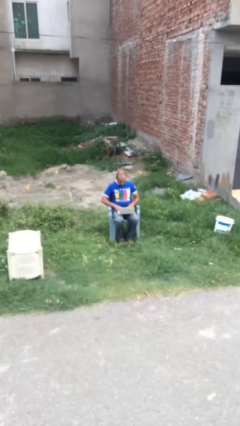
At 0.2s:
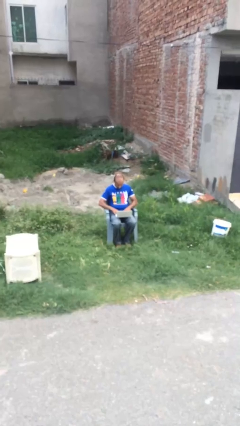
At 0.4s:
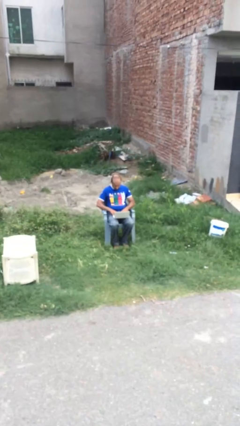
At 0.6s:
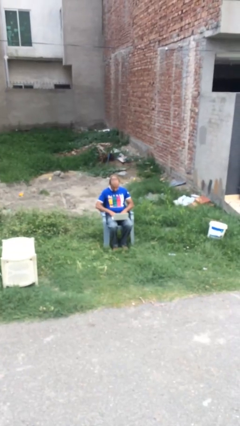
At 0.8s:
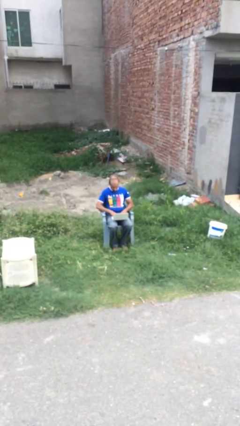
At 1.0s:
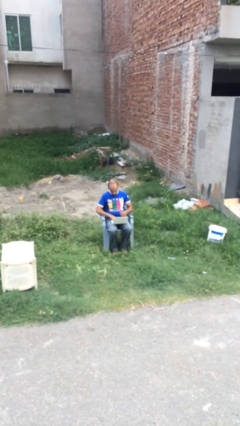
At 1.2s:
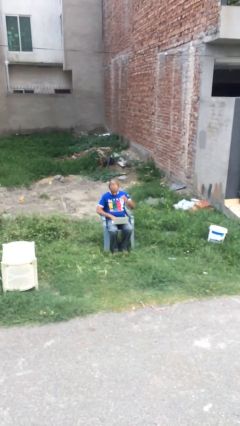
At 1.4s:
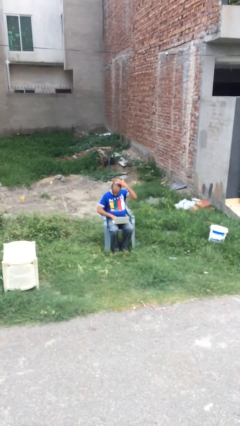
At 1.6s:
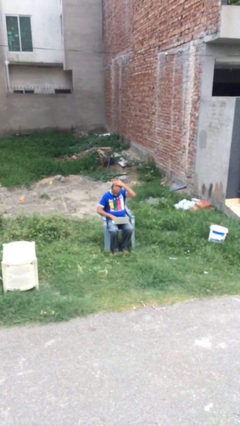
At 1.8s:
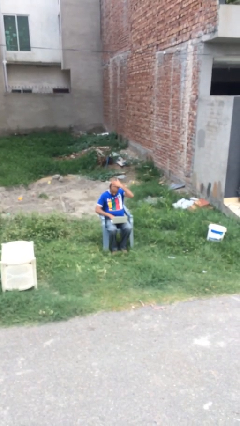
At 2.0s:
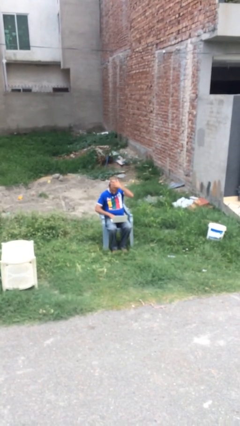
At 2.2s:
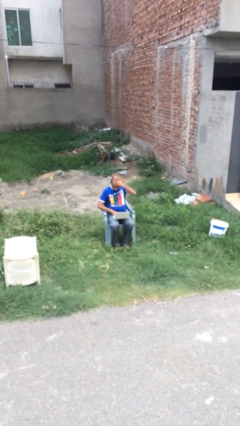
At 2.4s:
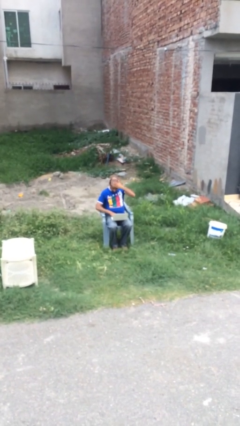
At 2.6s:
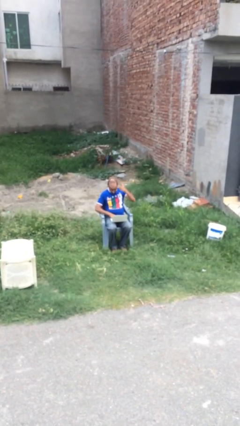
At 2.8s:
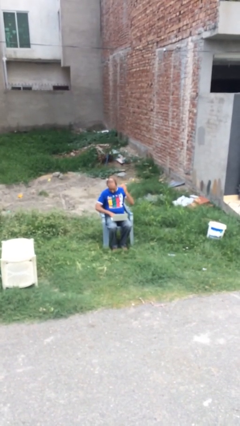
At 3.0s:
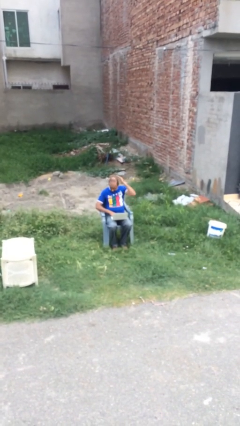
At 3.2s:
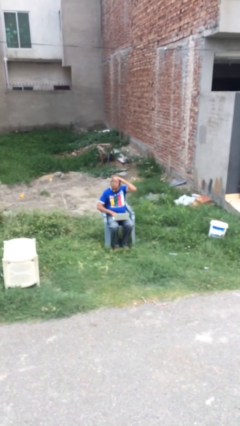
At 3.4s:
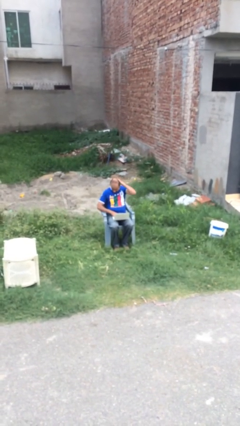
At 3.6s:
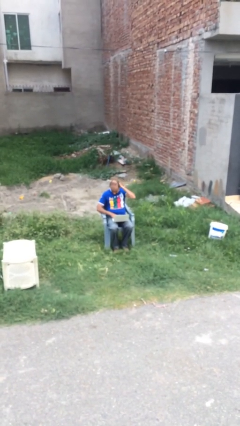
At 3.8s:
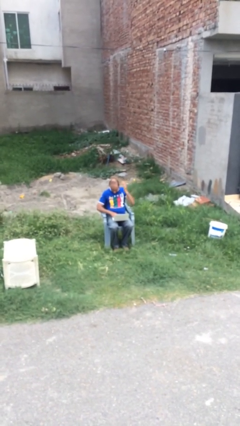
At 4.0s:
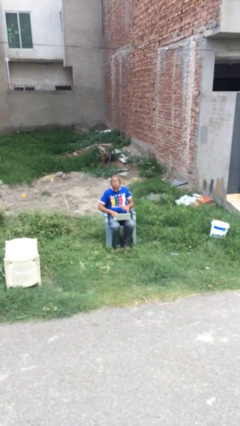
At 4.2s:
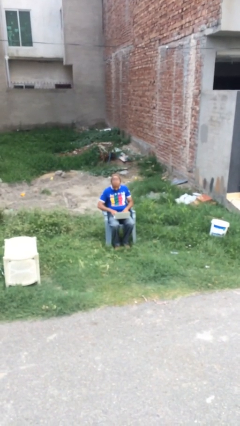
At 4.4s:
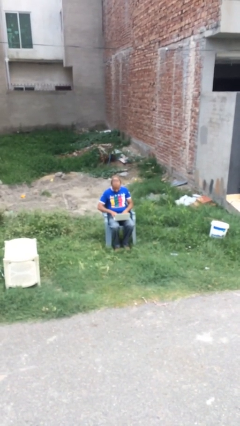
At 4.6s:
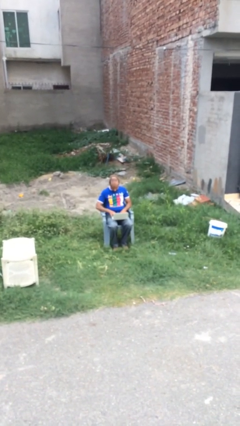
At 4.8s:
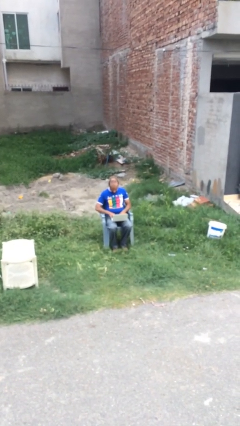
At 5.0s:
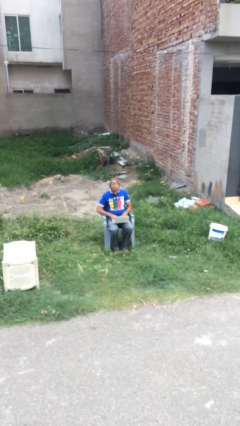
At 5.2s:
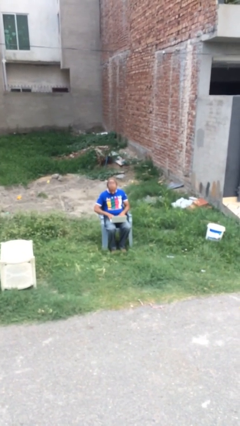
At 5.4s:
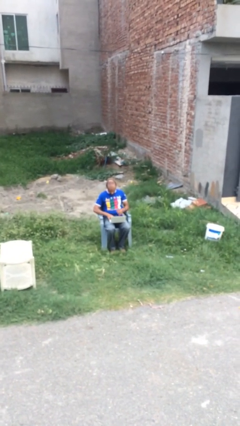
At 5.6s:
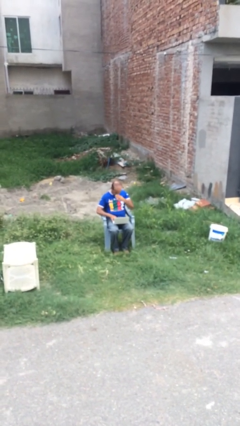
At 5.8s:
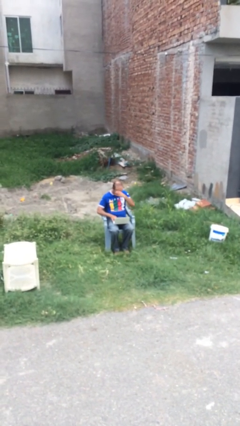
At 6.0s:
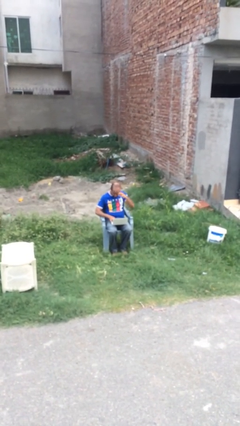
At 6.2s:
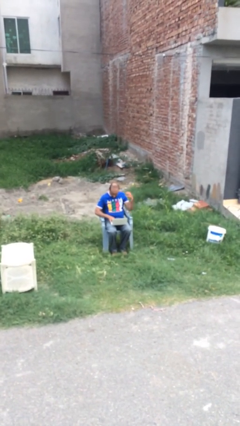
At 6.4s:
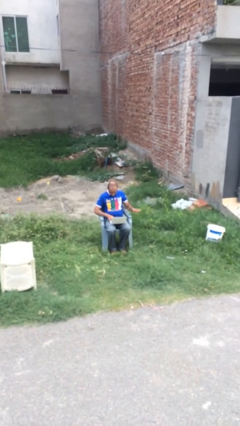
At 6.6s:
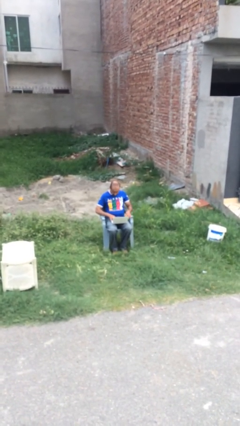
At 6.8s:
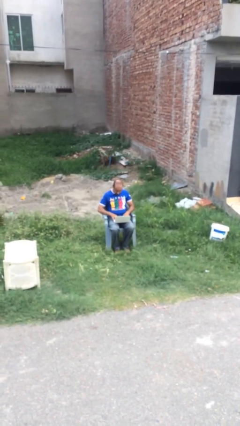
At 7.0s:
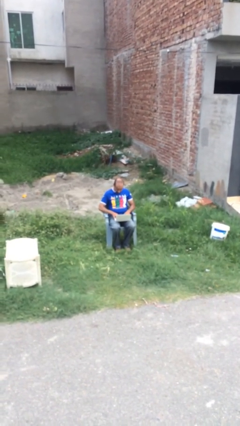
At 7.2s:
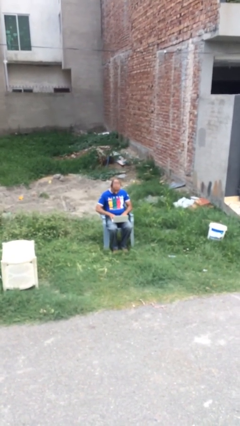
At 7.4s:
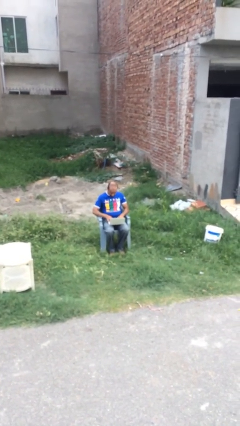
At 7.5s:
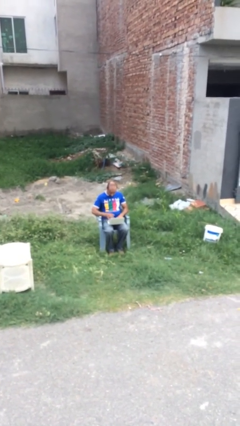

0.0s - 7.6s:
person interacts with laptop

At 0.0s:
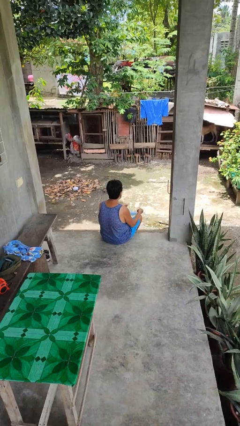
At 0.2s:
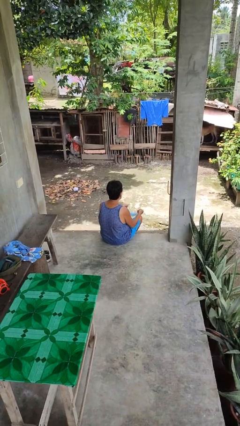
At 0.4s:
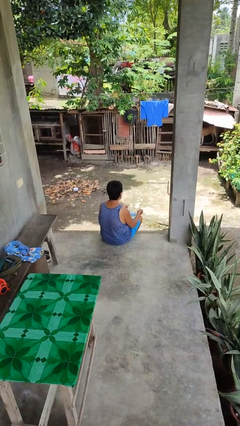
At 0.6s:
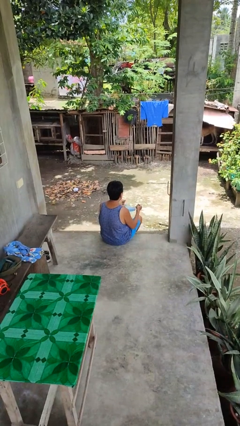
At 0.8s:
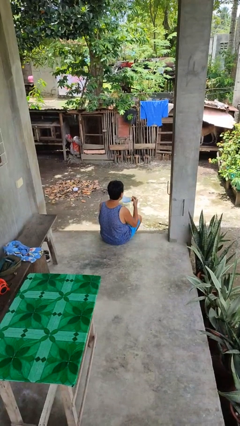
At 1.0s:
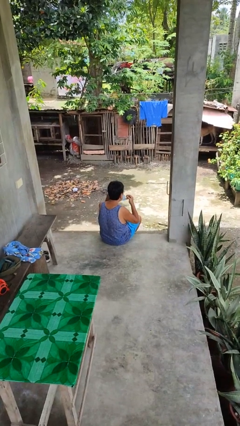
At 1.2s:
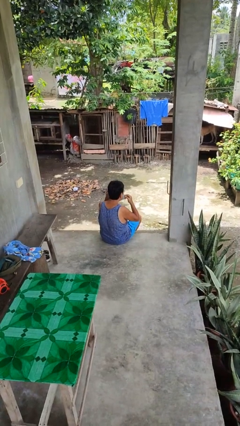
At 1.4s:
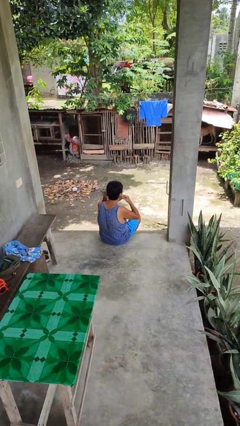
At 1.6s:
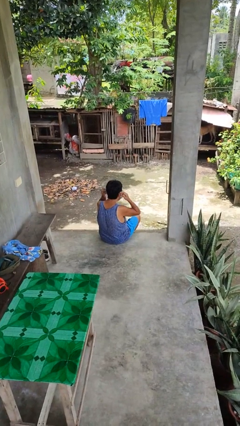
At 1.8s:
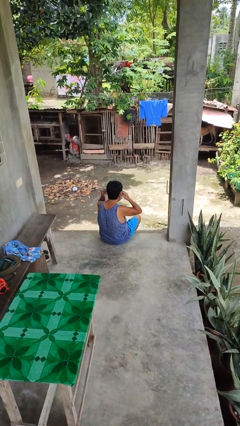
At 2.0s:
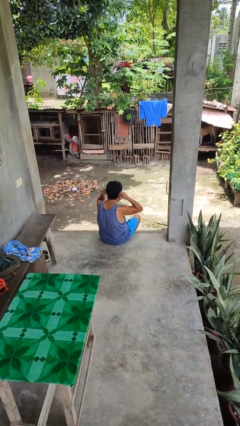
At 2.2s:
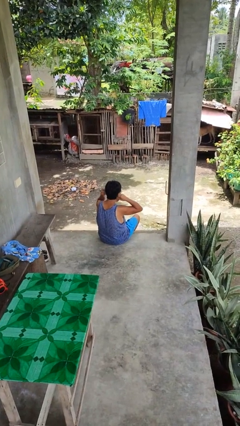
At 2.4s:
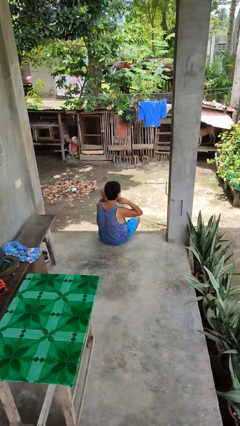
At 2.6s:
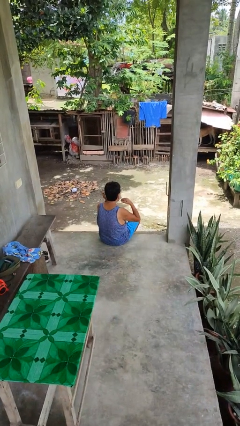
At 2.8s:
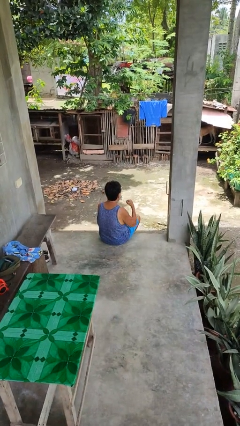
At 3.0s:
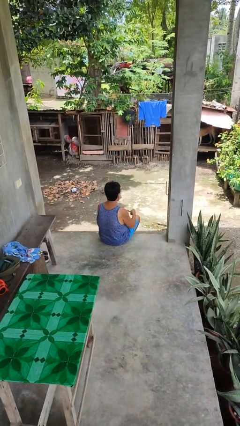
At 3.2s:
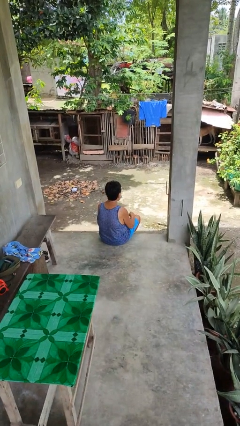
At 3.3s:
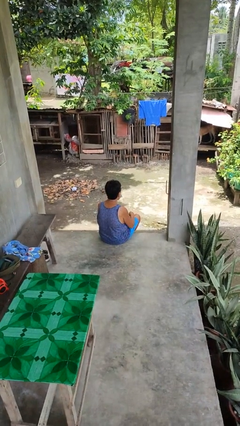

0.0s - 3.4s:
person puts on facemask

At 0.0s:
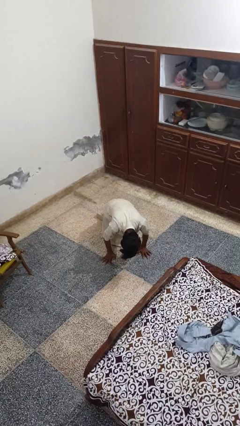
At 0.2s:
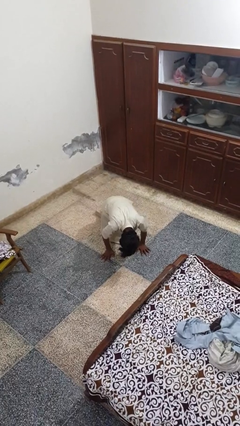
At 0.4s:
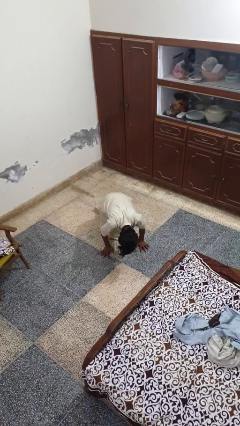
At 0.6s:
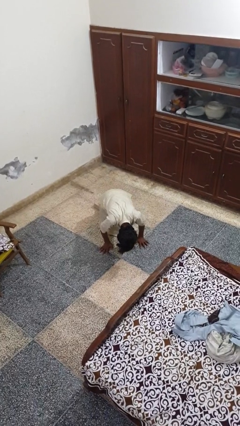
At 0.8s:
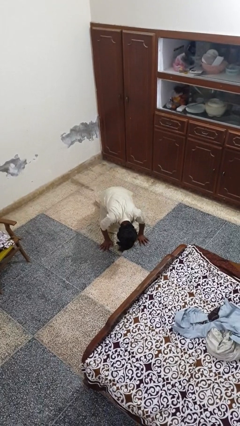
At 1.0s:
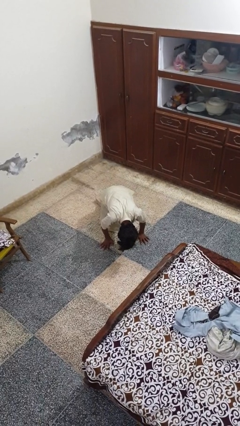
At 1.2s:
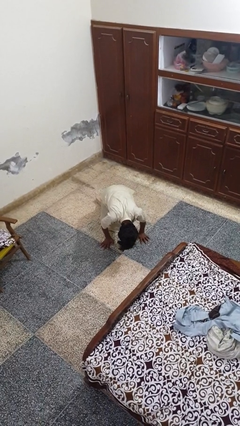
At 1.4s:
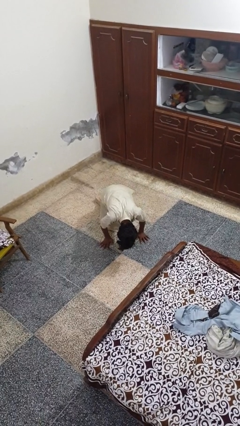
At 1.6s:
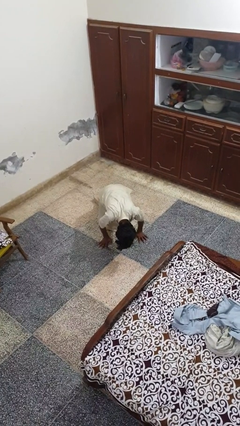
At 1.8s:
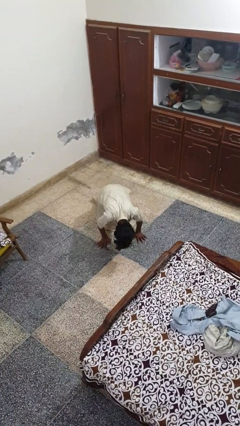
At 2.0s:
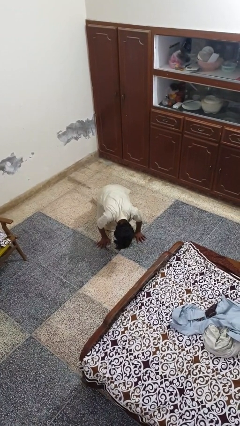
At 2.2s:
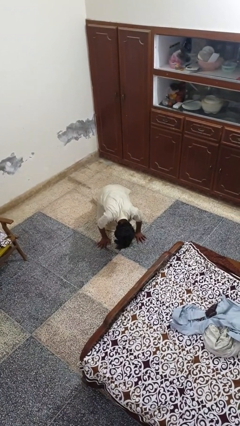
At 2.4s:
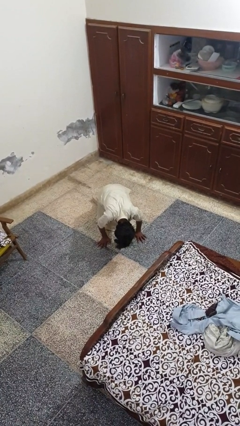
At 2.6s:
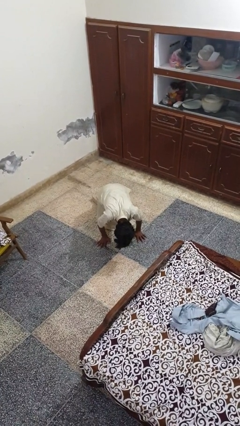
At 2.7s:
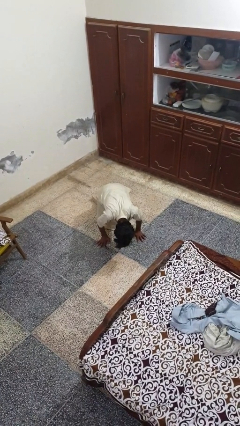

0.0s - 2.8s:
person lies down on floor

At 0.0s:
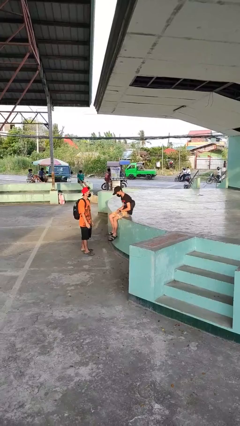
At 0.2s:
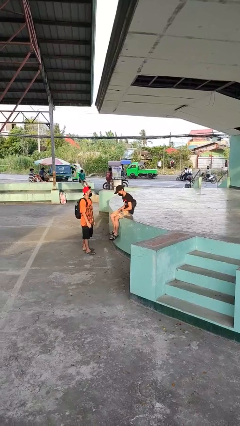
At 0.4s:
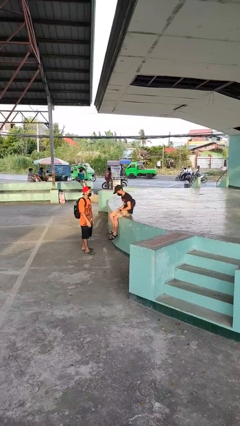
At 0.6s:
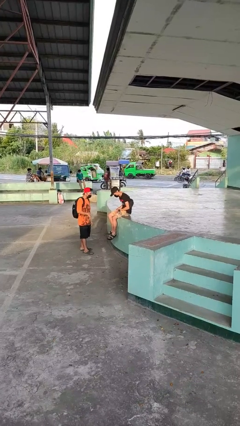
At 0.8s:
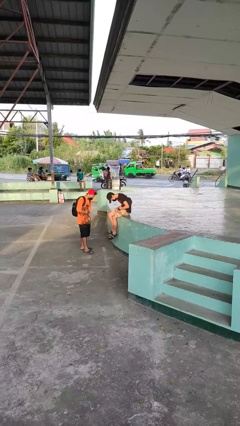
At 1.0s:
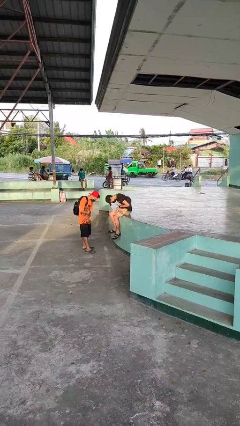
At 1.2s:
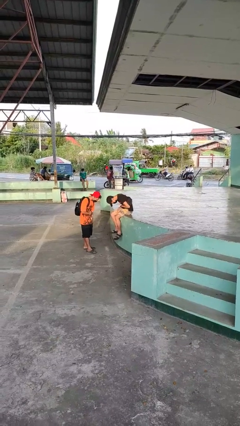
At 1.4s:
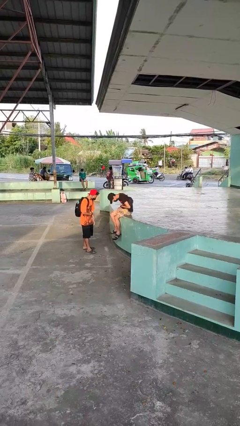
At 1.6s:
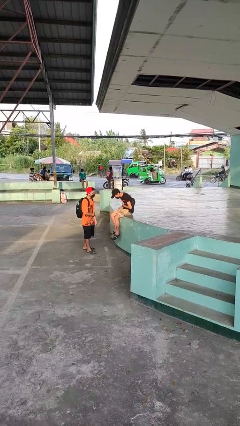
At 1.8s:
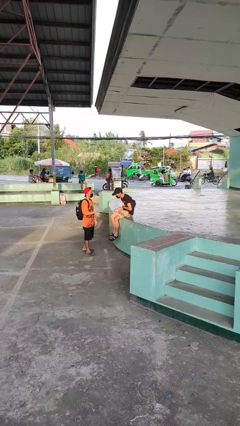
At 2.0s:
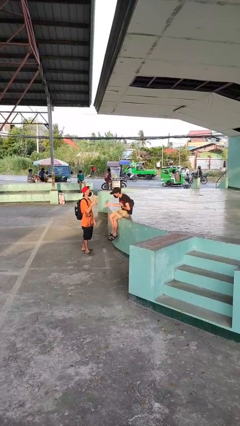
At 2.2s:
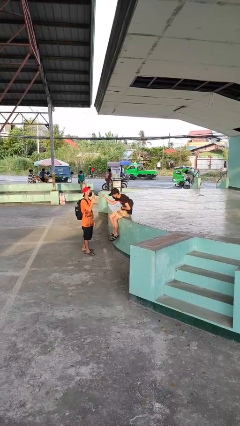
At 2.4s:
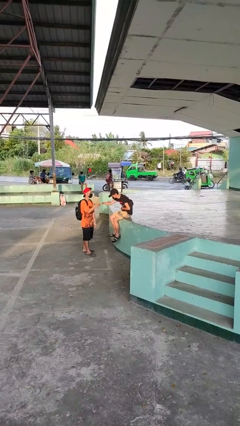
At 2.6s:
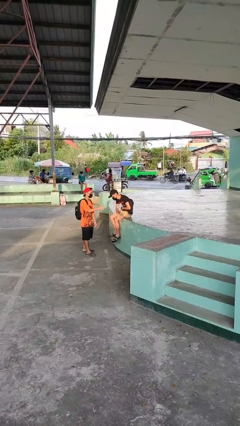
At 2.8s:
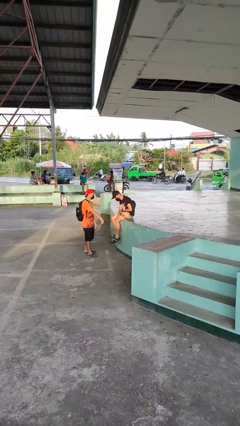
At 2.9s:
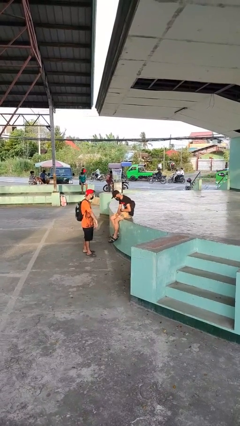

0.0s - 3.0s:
person laughs with person

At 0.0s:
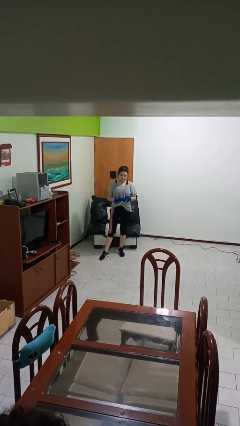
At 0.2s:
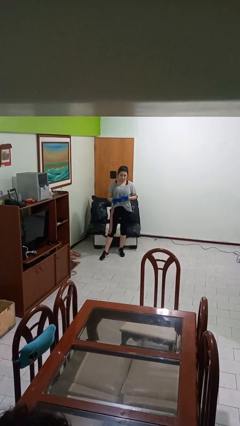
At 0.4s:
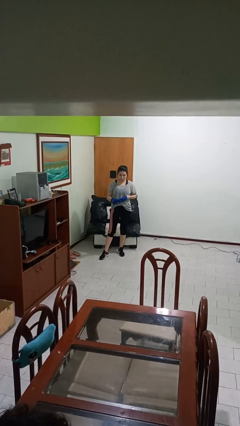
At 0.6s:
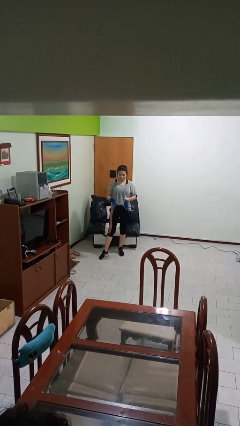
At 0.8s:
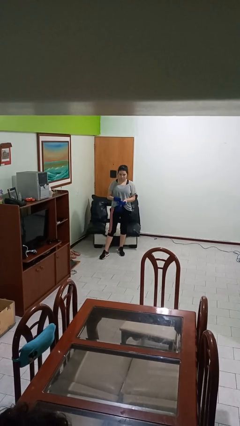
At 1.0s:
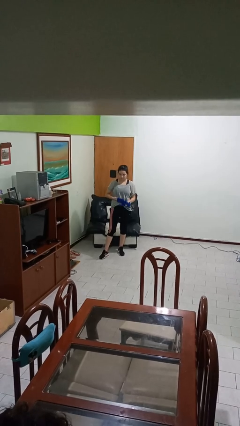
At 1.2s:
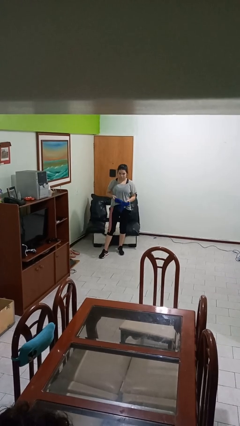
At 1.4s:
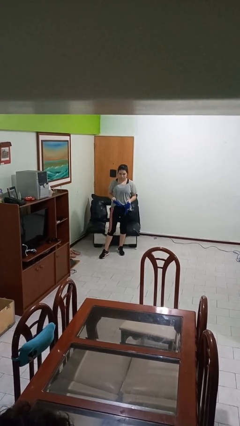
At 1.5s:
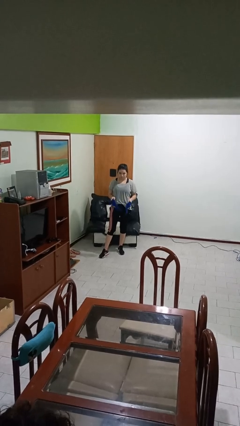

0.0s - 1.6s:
person takes off gloves
